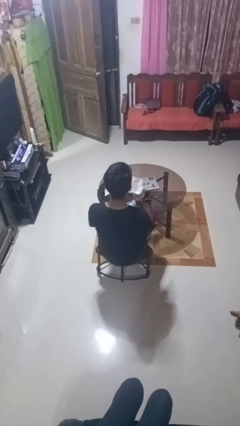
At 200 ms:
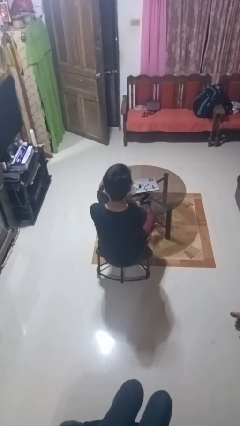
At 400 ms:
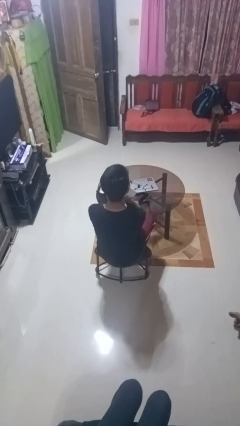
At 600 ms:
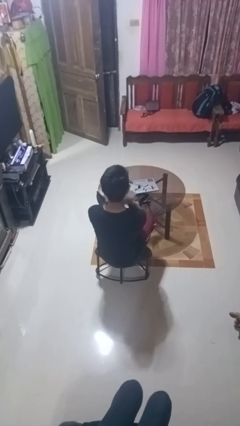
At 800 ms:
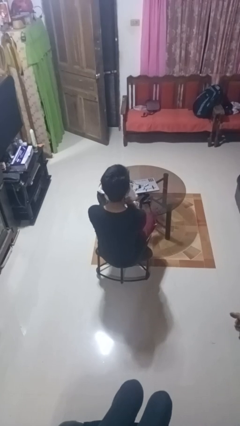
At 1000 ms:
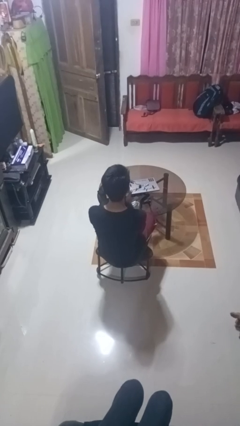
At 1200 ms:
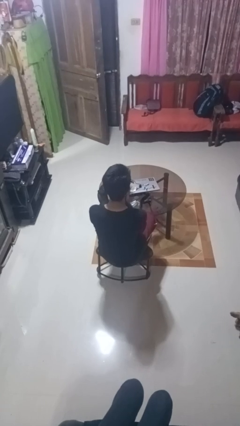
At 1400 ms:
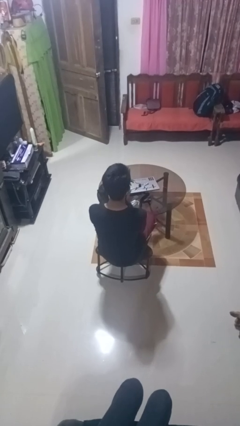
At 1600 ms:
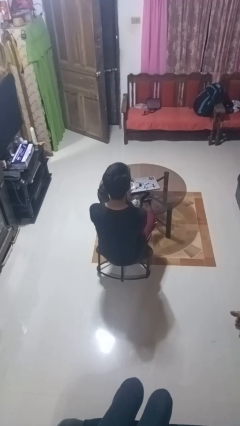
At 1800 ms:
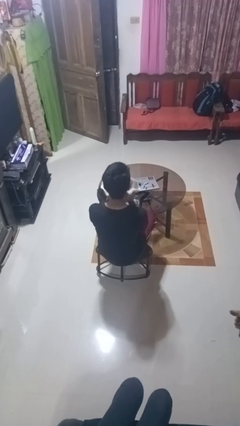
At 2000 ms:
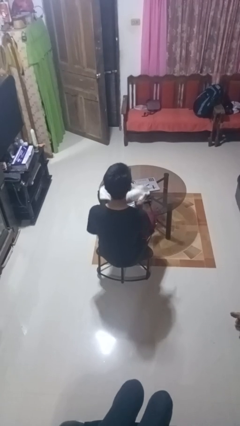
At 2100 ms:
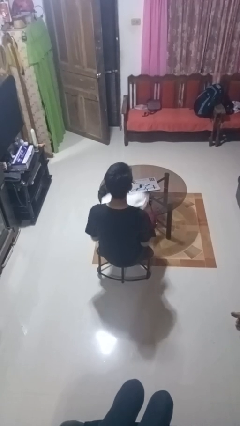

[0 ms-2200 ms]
person wipes mouth with napkin

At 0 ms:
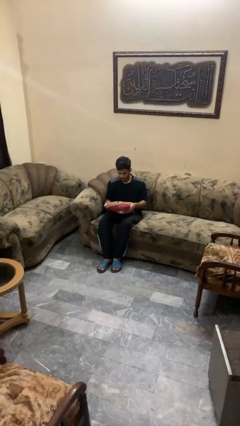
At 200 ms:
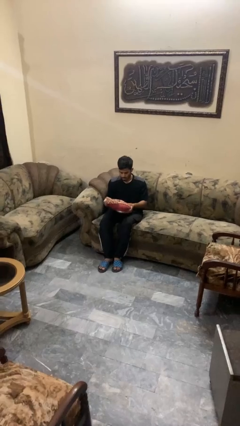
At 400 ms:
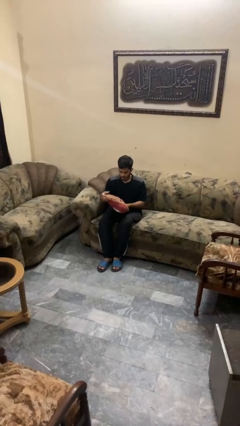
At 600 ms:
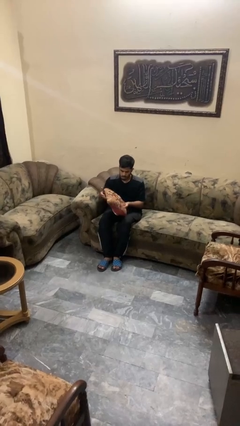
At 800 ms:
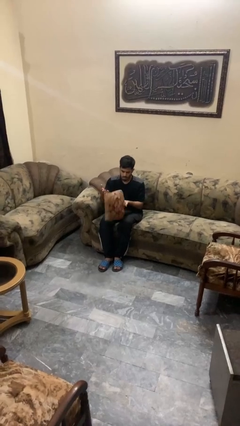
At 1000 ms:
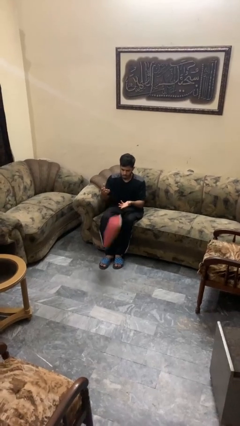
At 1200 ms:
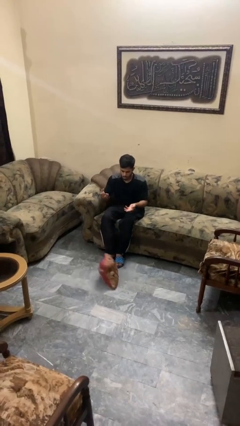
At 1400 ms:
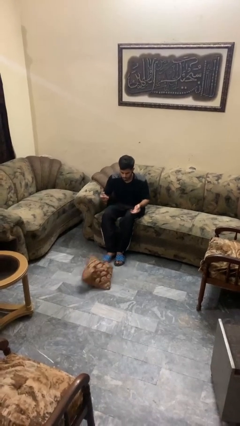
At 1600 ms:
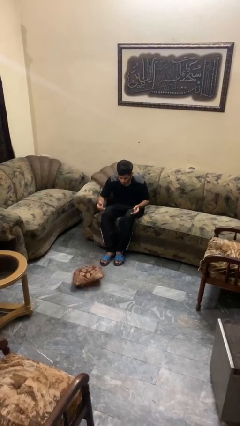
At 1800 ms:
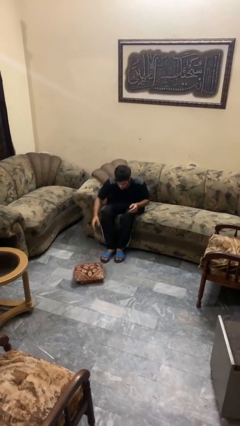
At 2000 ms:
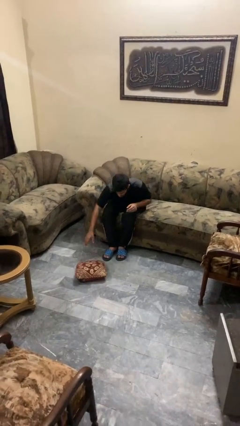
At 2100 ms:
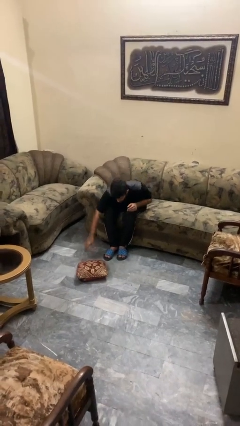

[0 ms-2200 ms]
person drops object

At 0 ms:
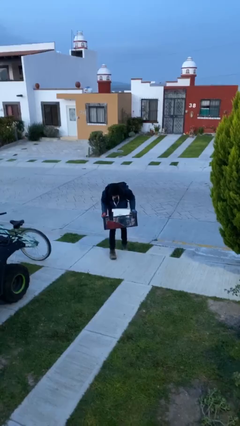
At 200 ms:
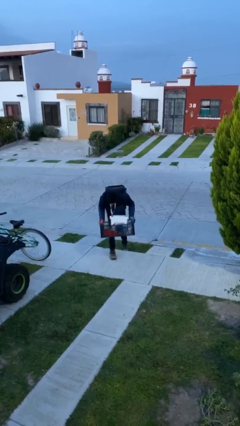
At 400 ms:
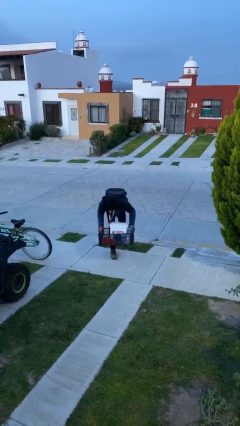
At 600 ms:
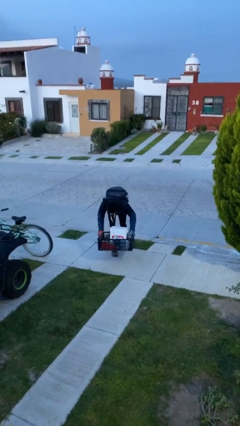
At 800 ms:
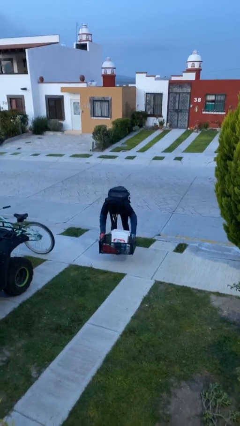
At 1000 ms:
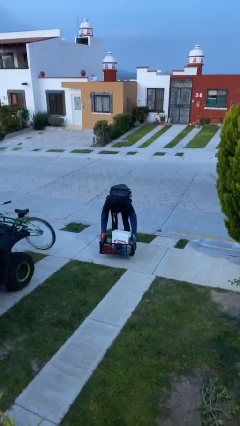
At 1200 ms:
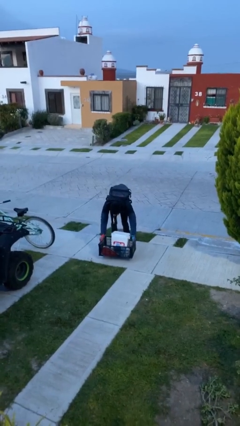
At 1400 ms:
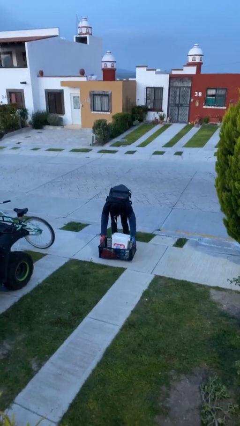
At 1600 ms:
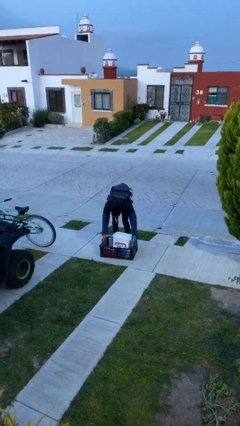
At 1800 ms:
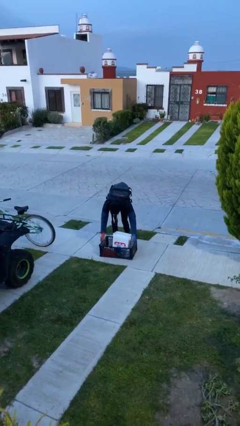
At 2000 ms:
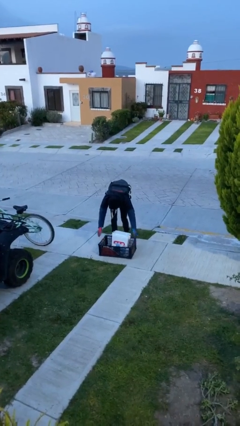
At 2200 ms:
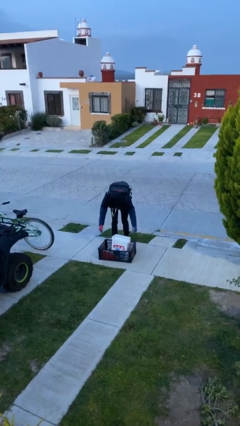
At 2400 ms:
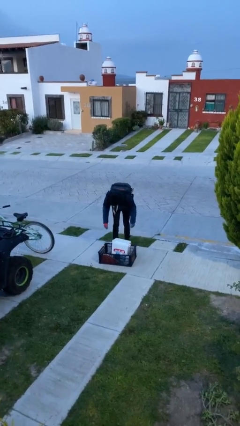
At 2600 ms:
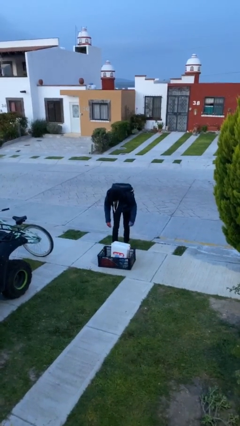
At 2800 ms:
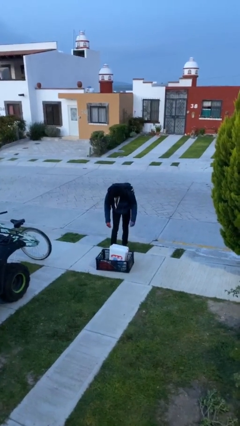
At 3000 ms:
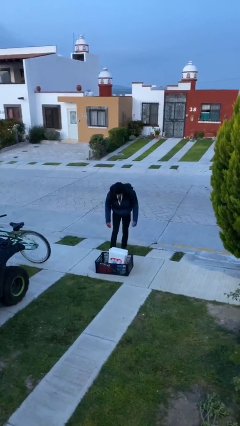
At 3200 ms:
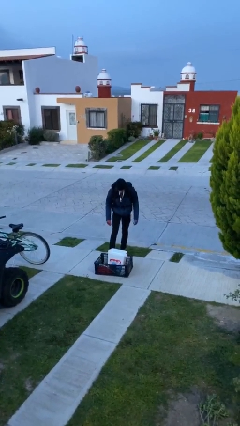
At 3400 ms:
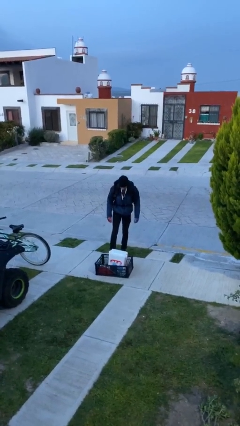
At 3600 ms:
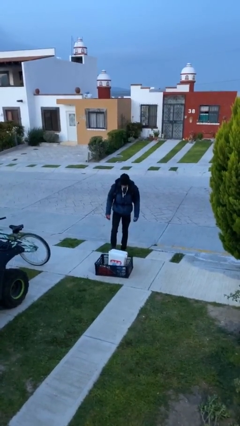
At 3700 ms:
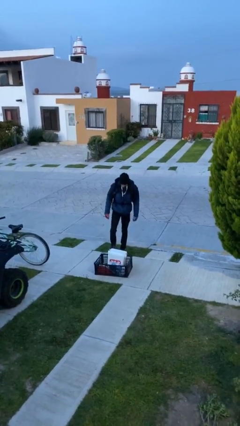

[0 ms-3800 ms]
person puts down object on floor

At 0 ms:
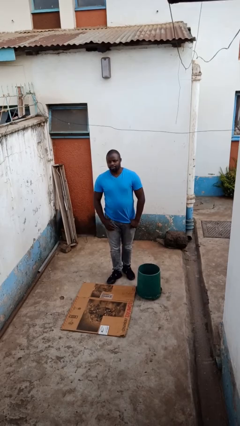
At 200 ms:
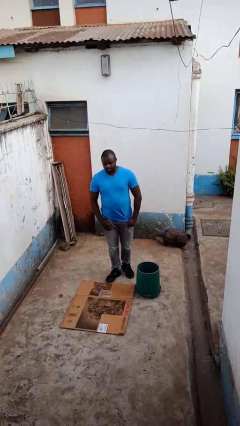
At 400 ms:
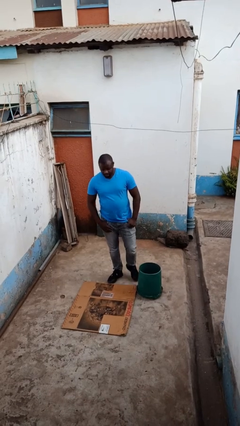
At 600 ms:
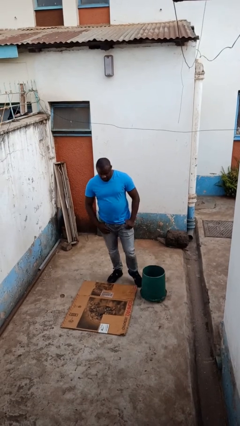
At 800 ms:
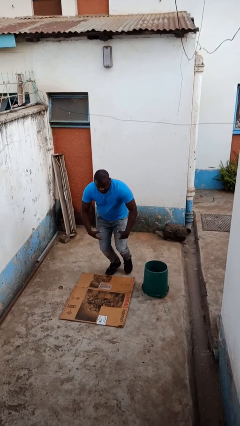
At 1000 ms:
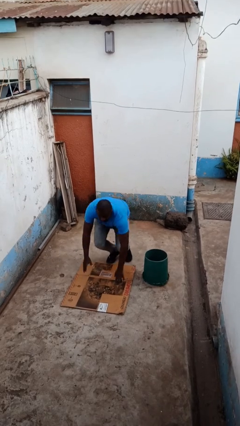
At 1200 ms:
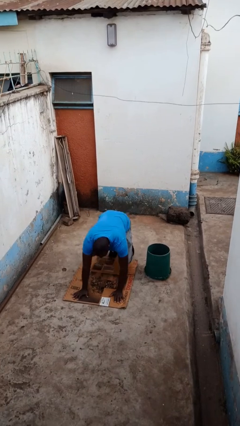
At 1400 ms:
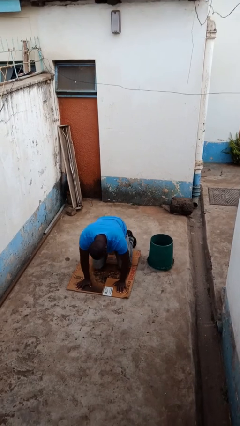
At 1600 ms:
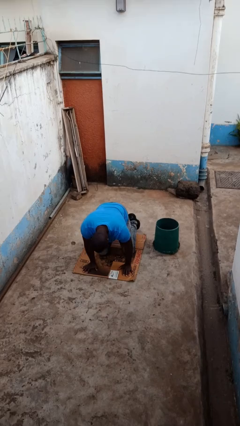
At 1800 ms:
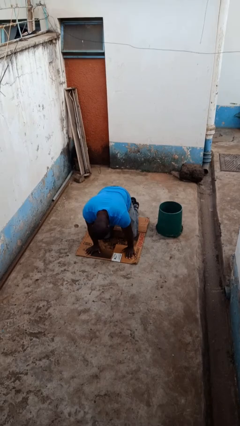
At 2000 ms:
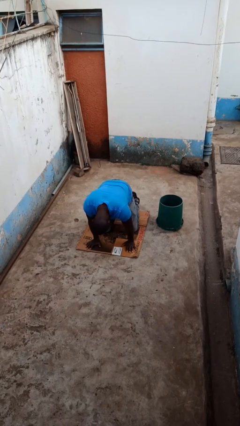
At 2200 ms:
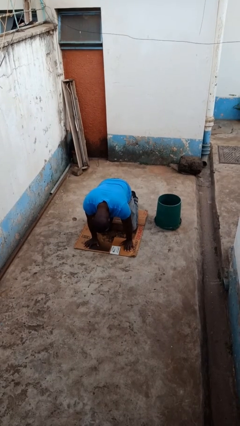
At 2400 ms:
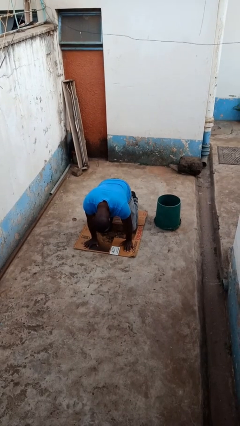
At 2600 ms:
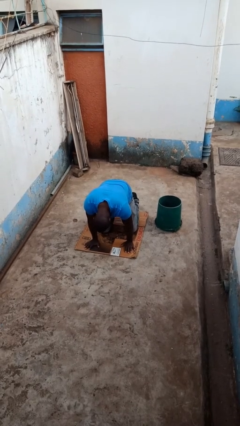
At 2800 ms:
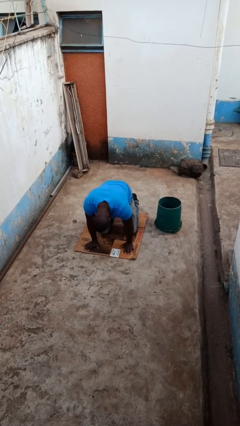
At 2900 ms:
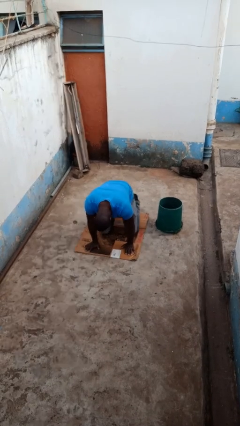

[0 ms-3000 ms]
person trips on object on floor

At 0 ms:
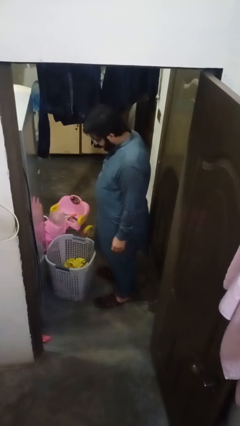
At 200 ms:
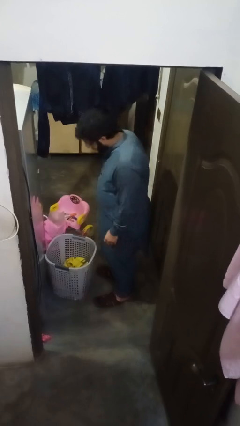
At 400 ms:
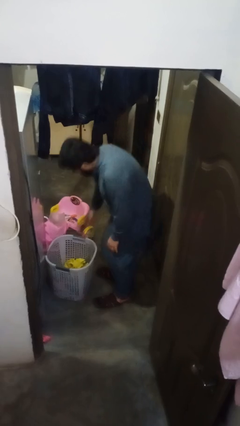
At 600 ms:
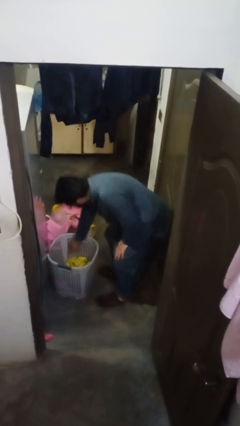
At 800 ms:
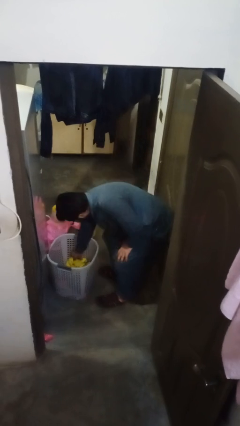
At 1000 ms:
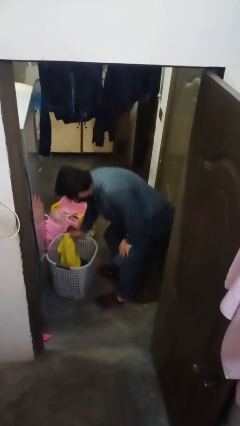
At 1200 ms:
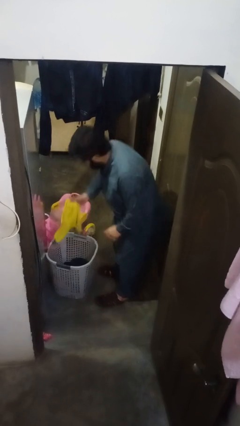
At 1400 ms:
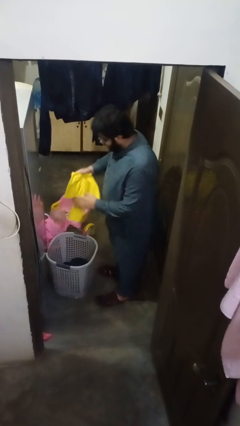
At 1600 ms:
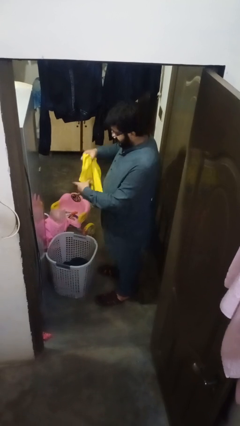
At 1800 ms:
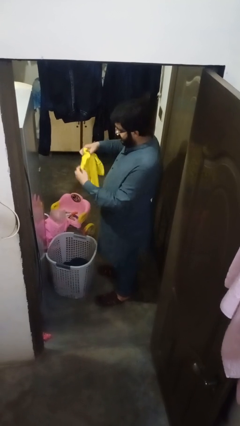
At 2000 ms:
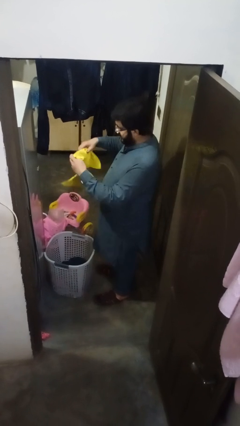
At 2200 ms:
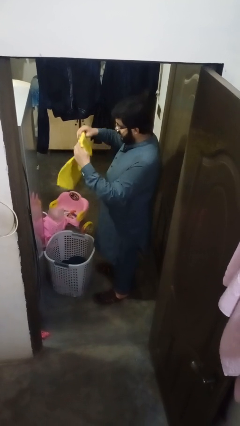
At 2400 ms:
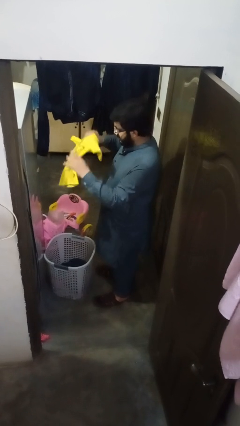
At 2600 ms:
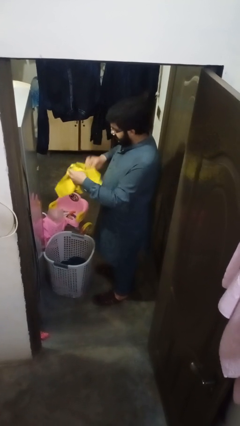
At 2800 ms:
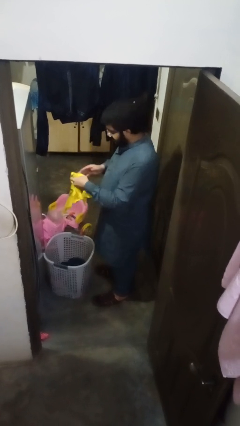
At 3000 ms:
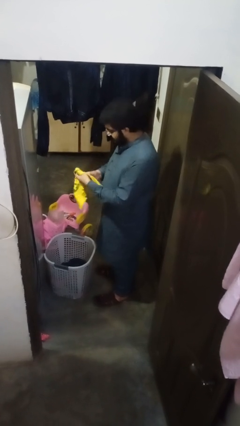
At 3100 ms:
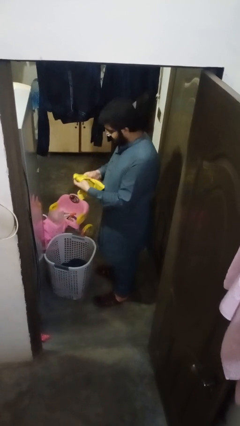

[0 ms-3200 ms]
person folds shirt

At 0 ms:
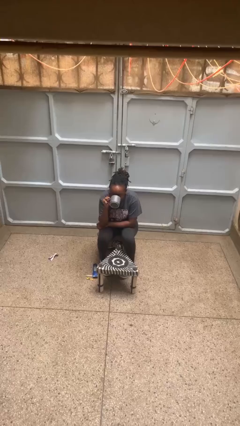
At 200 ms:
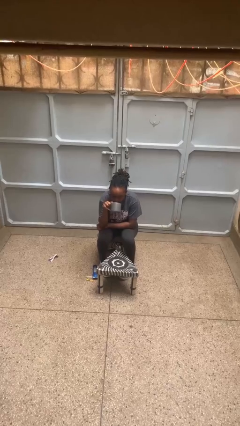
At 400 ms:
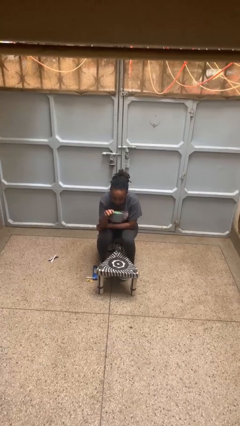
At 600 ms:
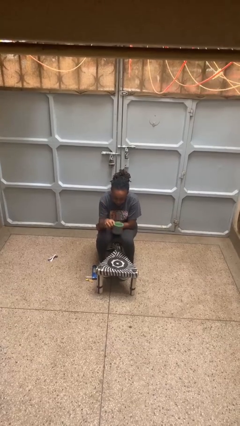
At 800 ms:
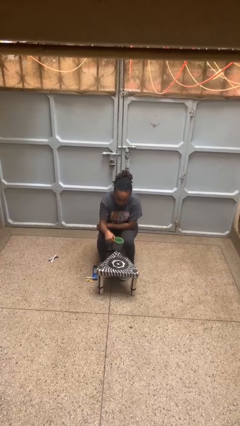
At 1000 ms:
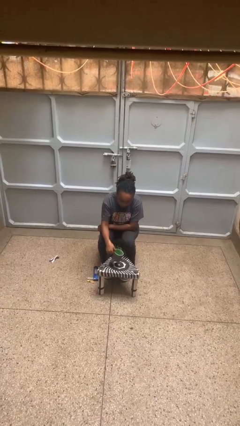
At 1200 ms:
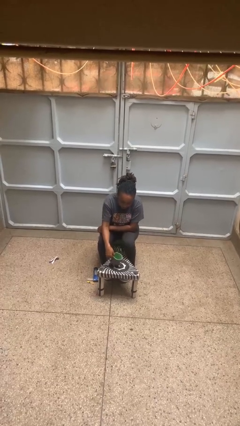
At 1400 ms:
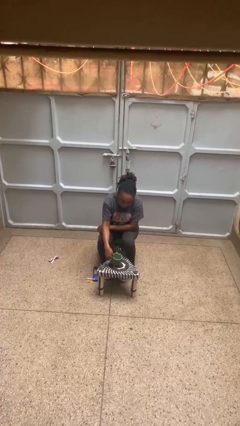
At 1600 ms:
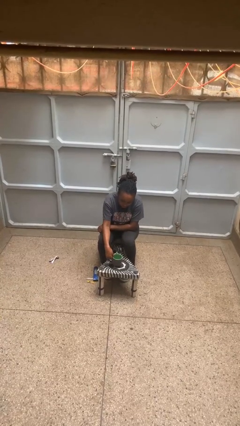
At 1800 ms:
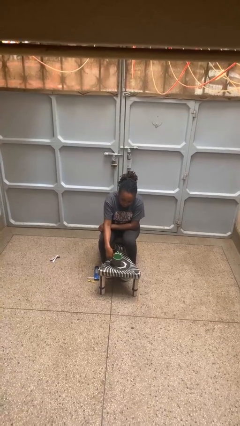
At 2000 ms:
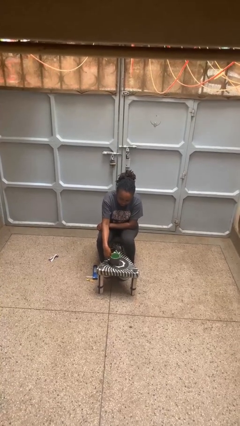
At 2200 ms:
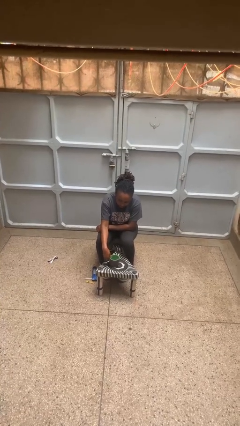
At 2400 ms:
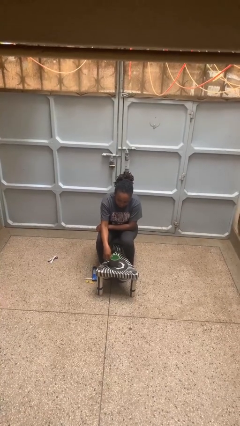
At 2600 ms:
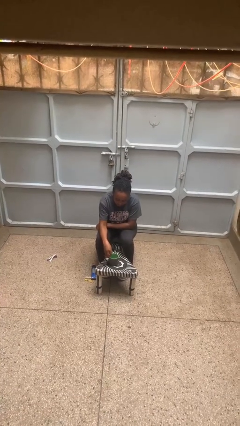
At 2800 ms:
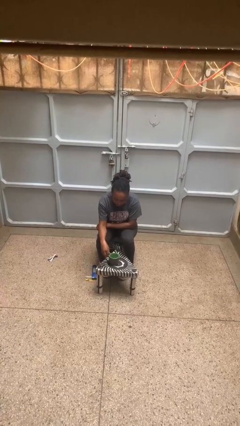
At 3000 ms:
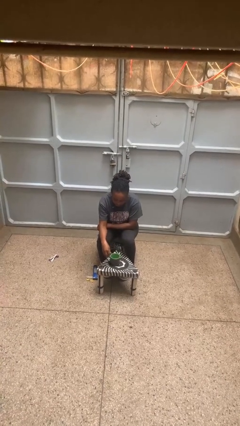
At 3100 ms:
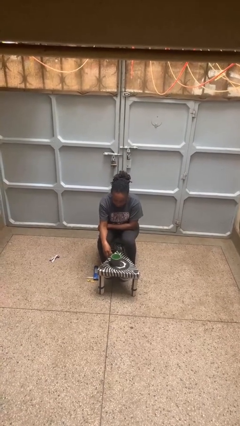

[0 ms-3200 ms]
person puts down object on table

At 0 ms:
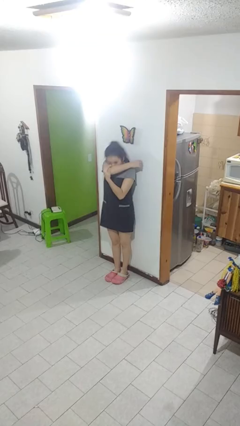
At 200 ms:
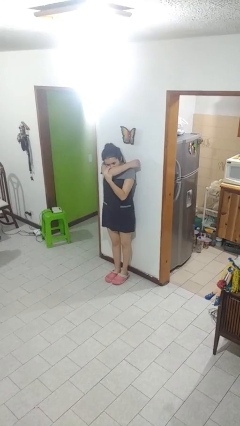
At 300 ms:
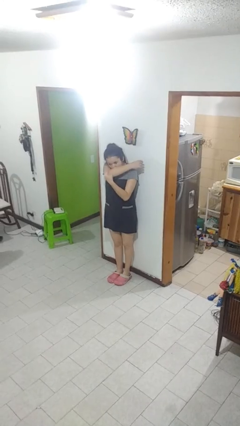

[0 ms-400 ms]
person sneezes into arm
